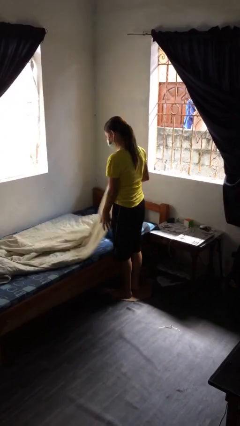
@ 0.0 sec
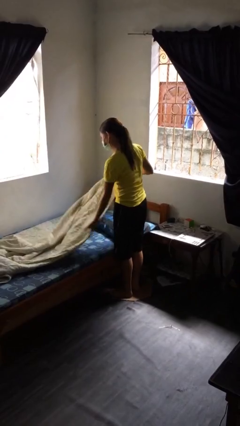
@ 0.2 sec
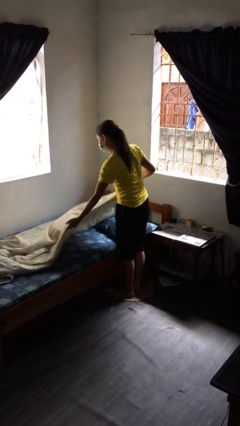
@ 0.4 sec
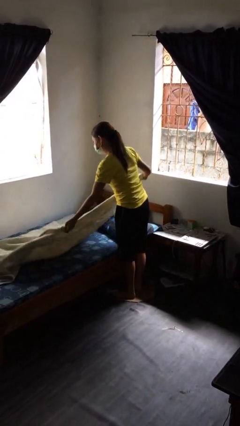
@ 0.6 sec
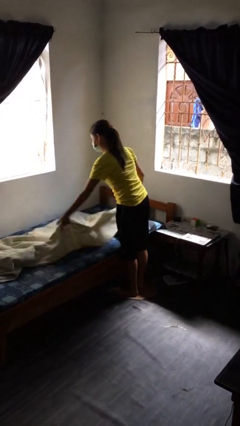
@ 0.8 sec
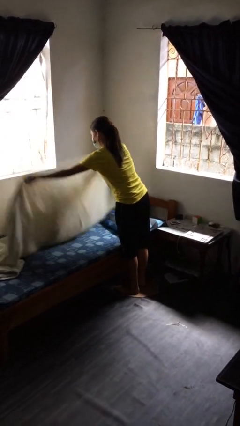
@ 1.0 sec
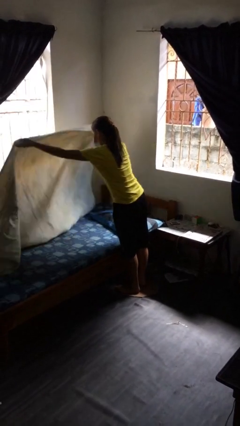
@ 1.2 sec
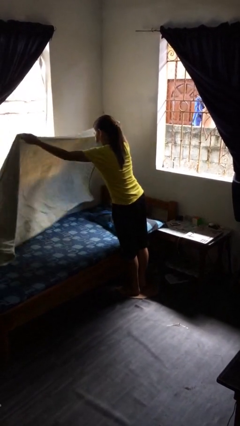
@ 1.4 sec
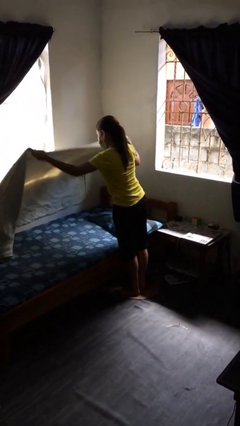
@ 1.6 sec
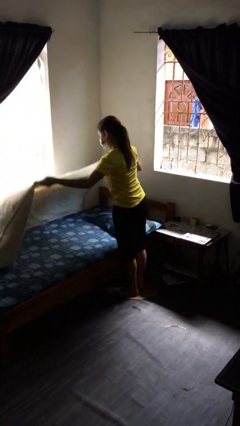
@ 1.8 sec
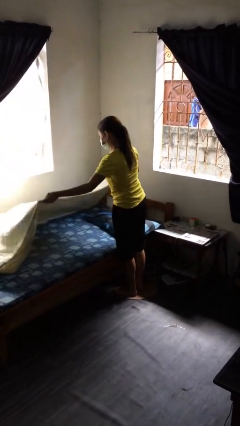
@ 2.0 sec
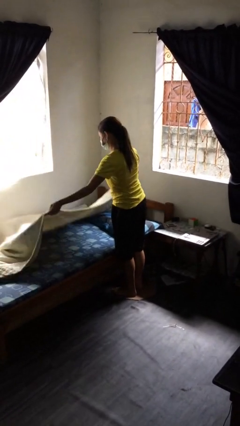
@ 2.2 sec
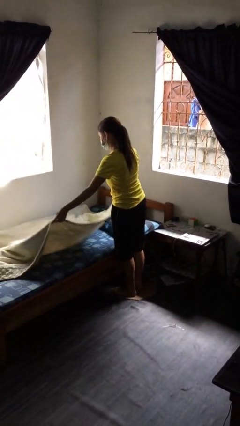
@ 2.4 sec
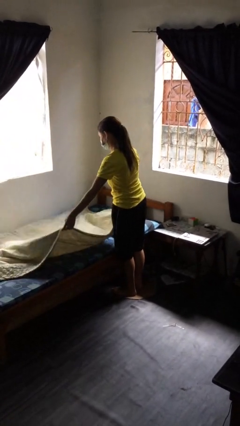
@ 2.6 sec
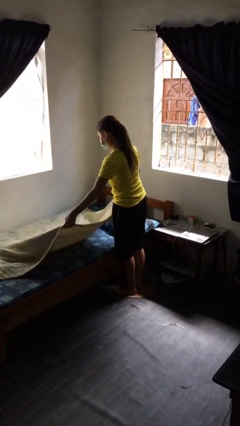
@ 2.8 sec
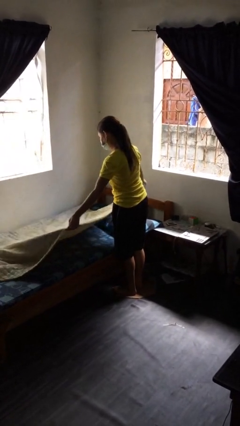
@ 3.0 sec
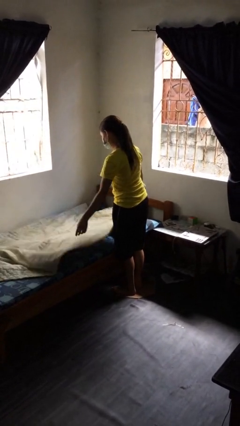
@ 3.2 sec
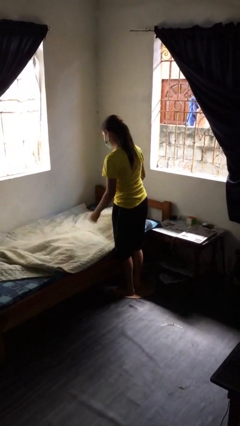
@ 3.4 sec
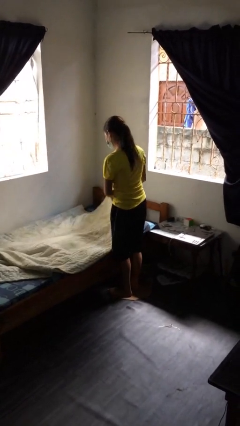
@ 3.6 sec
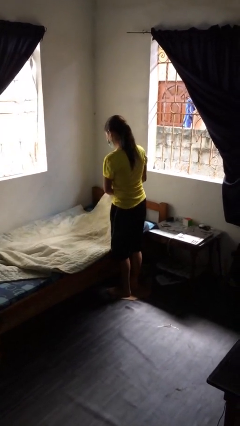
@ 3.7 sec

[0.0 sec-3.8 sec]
person makes bed

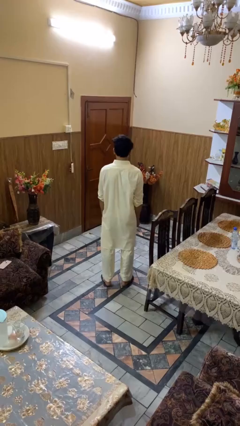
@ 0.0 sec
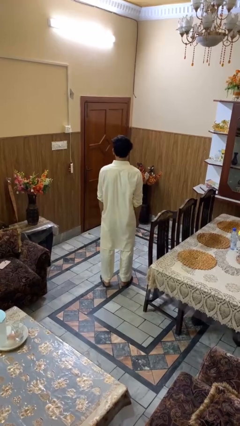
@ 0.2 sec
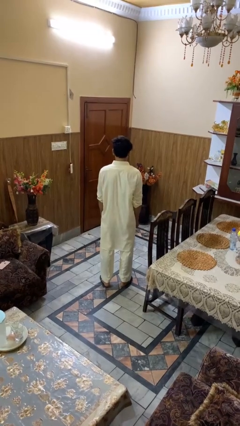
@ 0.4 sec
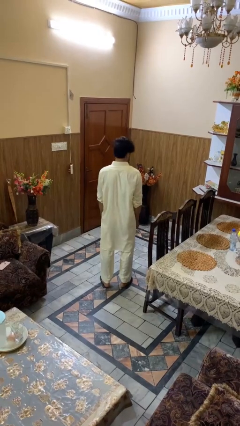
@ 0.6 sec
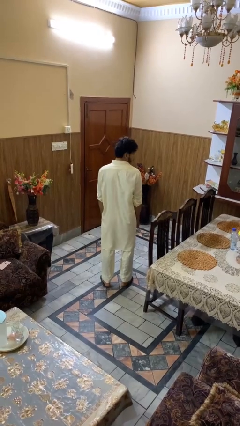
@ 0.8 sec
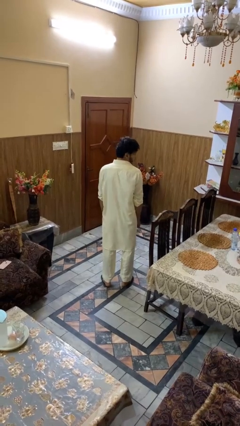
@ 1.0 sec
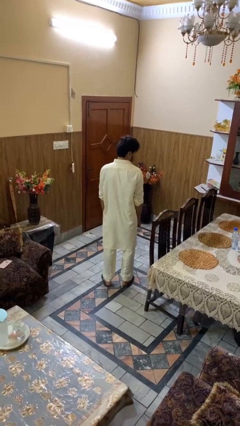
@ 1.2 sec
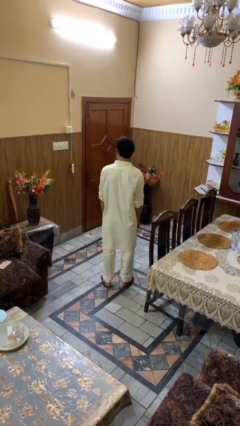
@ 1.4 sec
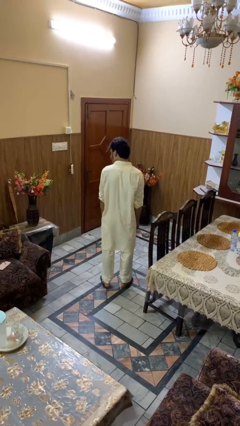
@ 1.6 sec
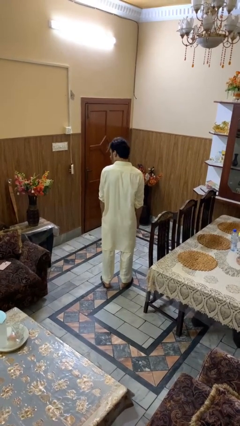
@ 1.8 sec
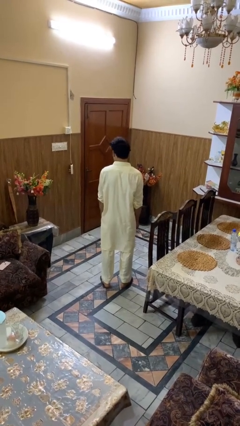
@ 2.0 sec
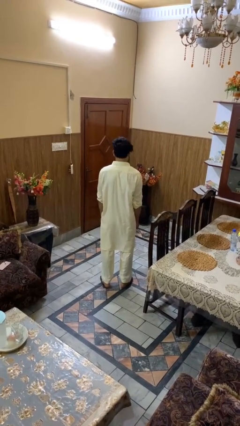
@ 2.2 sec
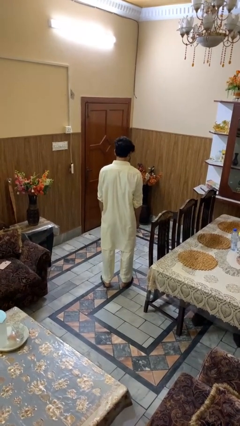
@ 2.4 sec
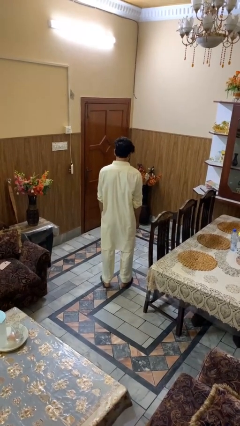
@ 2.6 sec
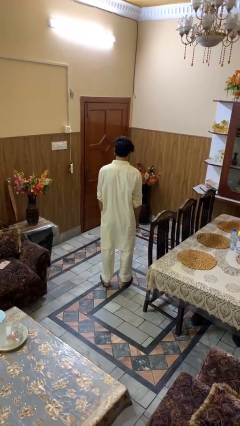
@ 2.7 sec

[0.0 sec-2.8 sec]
person shakes head

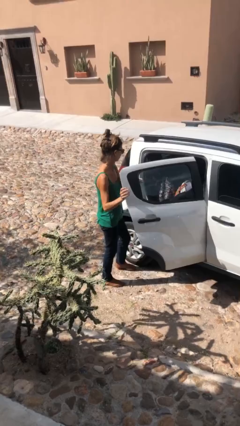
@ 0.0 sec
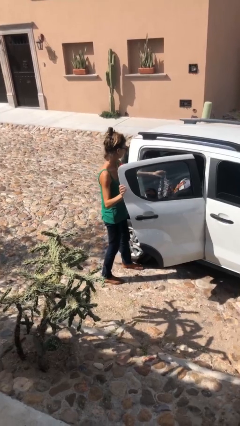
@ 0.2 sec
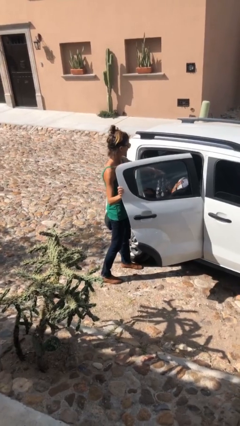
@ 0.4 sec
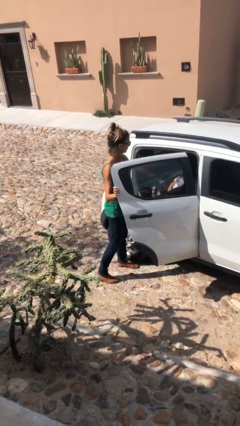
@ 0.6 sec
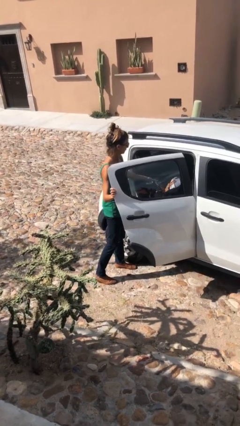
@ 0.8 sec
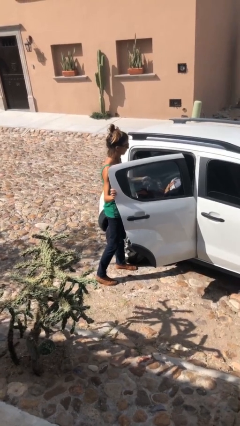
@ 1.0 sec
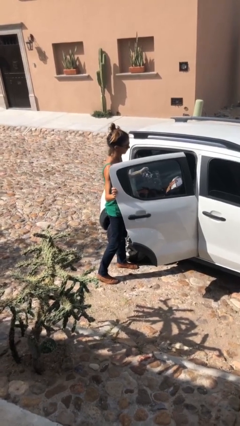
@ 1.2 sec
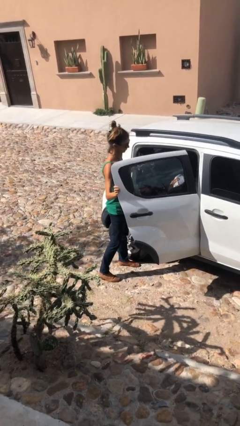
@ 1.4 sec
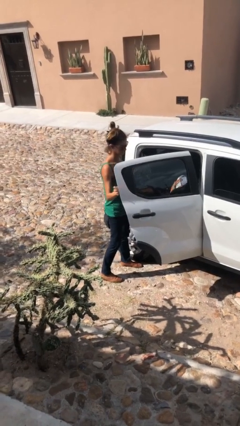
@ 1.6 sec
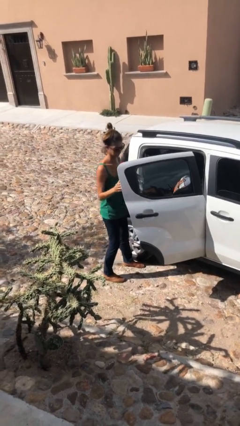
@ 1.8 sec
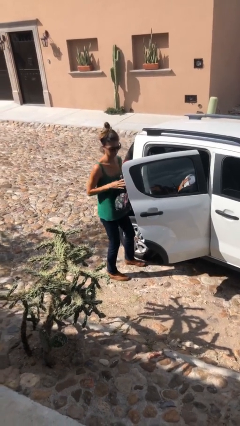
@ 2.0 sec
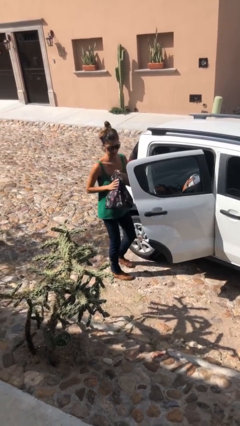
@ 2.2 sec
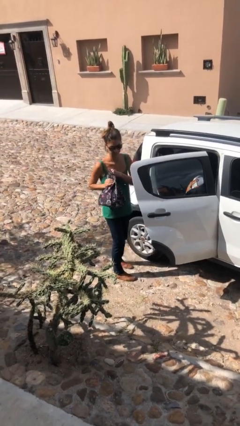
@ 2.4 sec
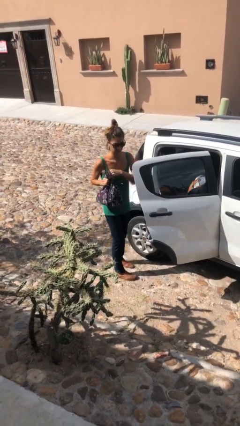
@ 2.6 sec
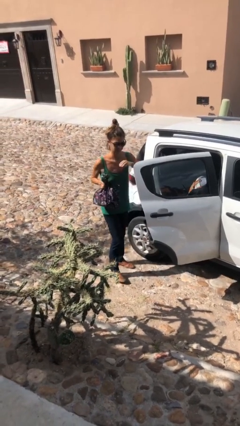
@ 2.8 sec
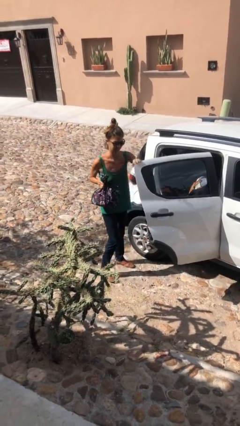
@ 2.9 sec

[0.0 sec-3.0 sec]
person unloads car

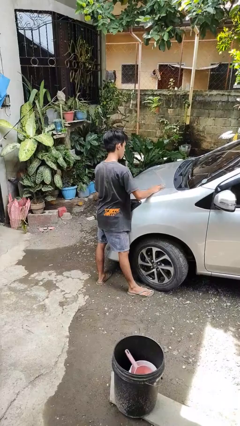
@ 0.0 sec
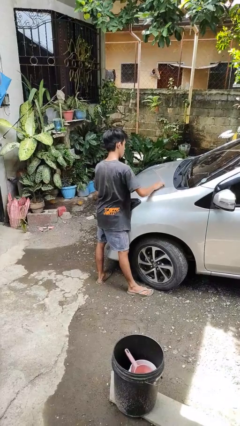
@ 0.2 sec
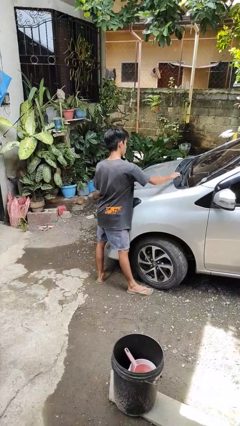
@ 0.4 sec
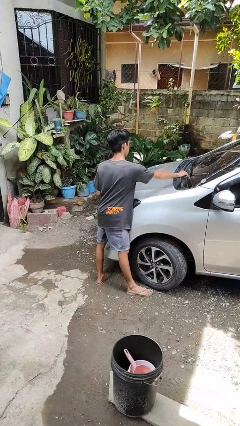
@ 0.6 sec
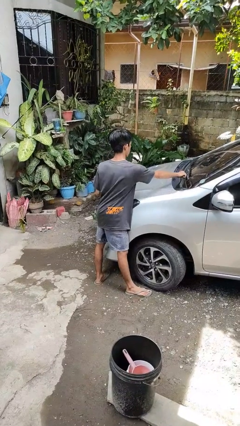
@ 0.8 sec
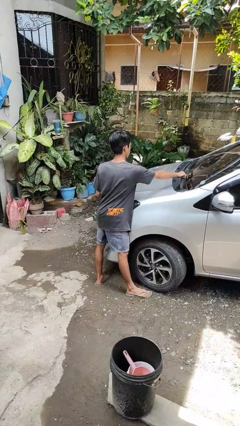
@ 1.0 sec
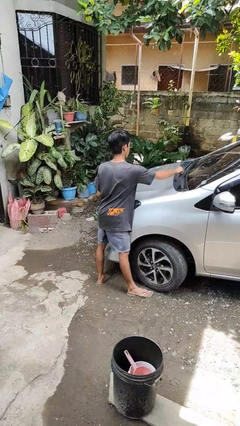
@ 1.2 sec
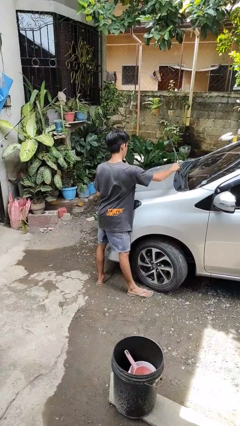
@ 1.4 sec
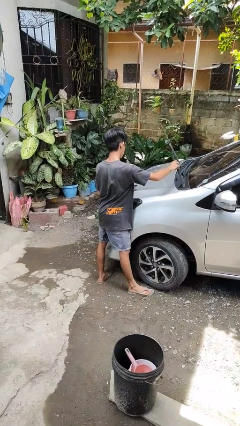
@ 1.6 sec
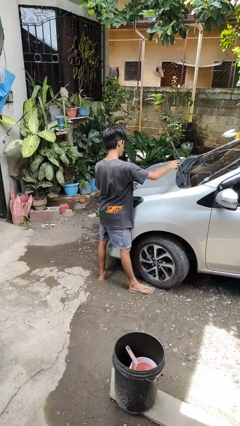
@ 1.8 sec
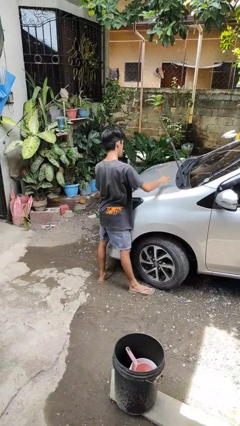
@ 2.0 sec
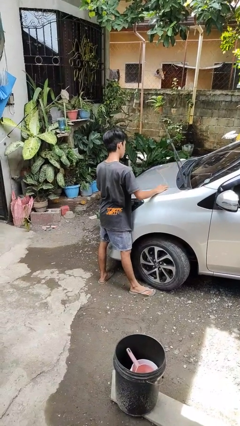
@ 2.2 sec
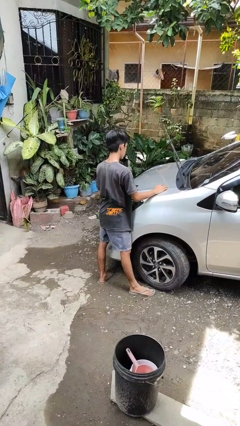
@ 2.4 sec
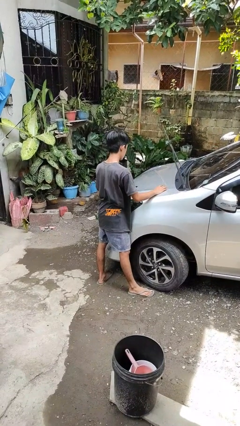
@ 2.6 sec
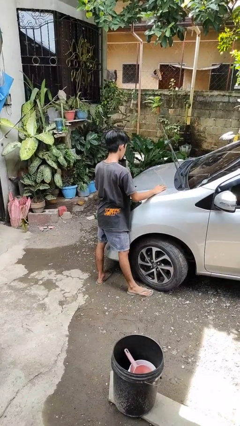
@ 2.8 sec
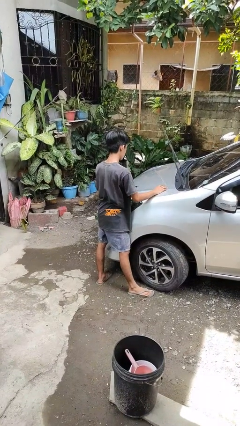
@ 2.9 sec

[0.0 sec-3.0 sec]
person flips up car wipers

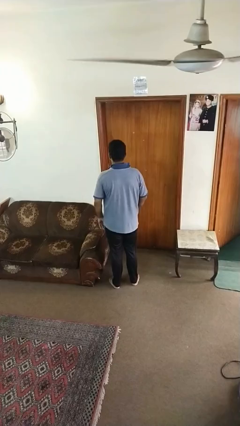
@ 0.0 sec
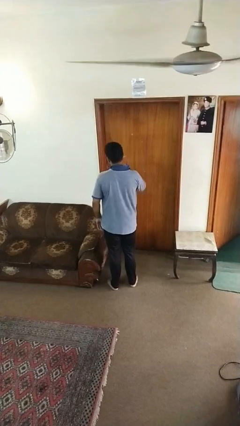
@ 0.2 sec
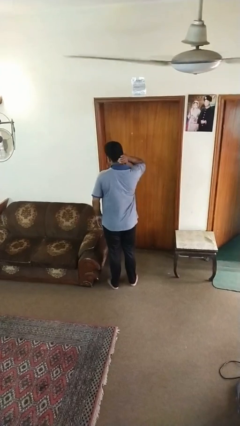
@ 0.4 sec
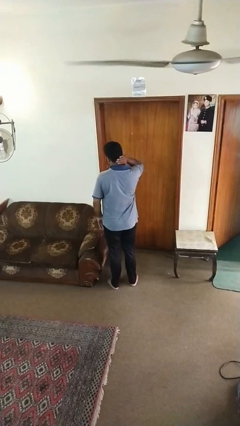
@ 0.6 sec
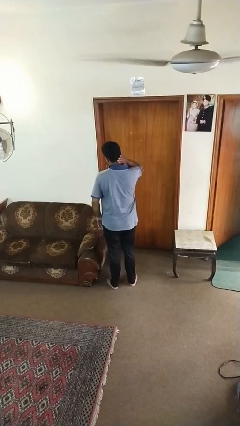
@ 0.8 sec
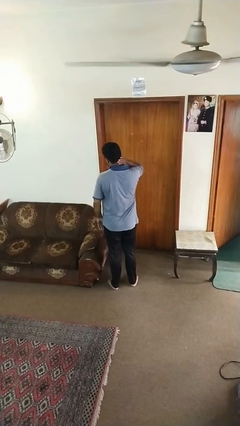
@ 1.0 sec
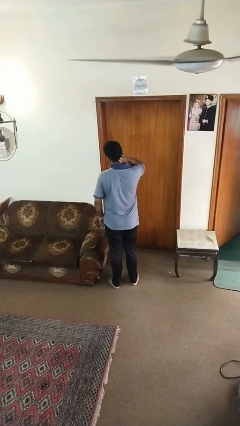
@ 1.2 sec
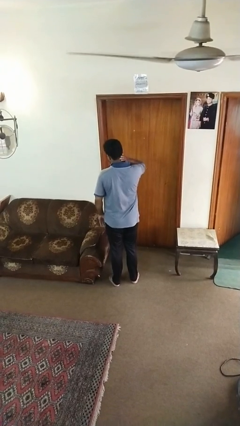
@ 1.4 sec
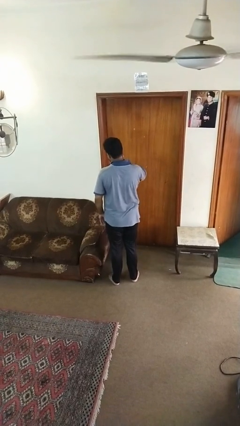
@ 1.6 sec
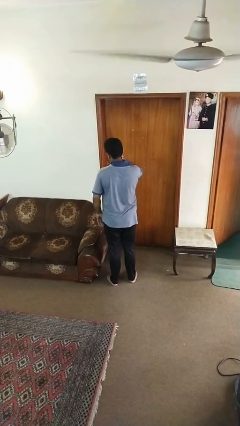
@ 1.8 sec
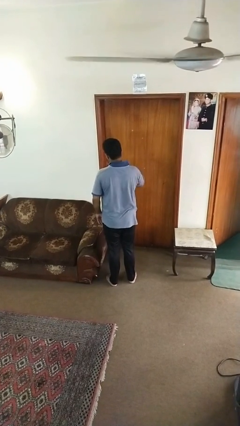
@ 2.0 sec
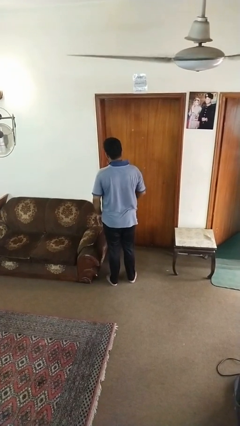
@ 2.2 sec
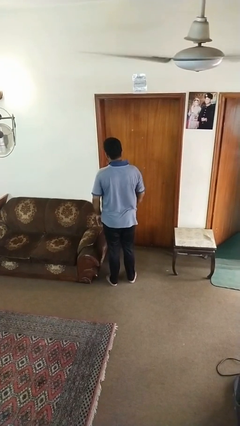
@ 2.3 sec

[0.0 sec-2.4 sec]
person rubs neck

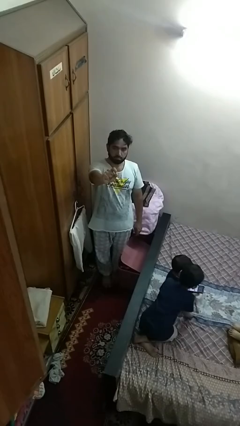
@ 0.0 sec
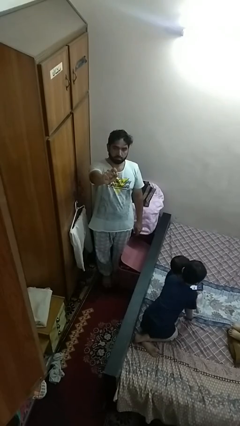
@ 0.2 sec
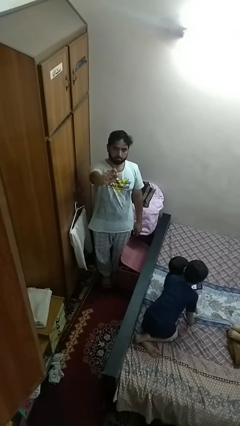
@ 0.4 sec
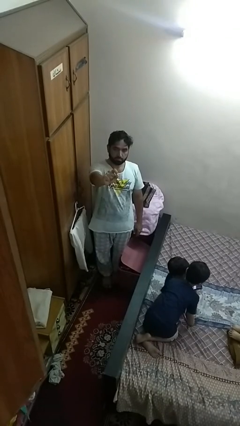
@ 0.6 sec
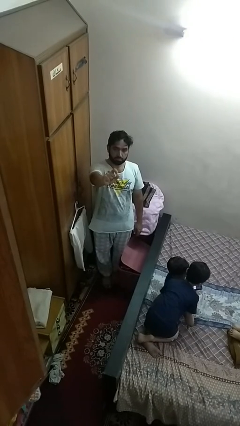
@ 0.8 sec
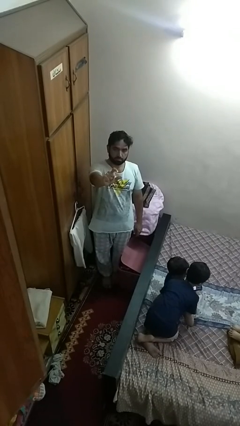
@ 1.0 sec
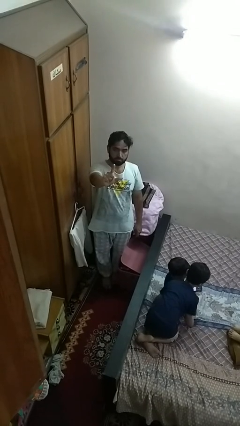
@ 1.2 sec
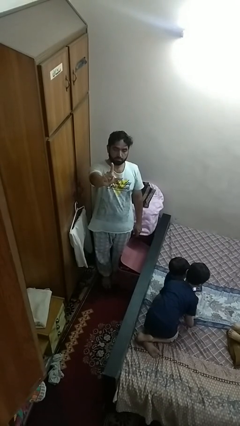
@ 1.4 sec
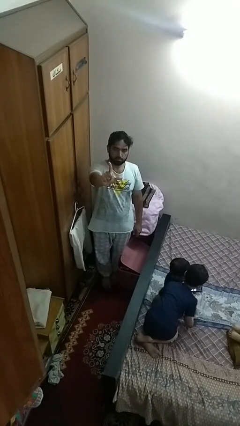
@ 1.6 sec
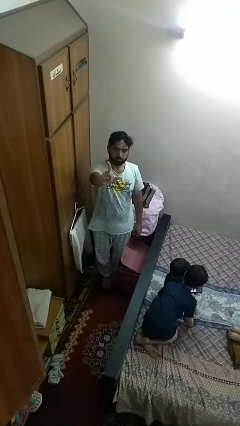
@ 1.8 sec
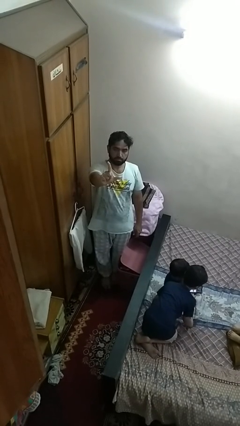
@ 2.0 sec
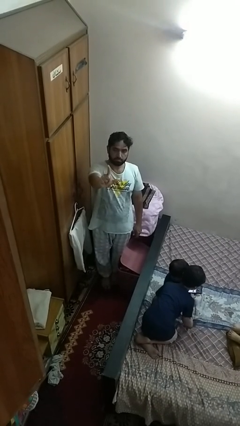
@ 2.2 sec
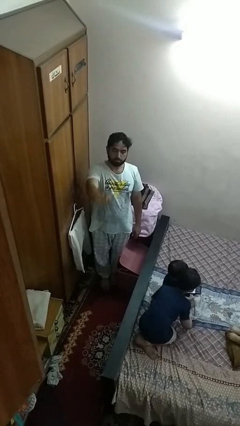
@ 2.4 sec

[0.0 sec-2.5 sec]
person gestures zoom out
